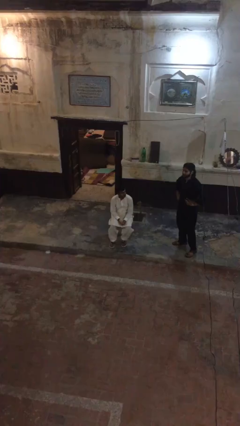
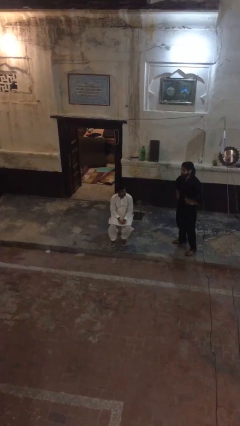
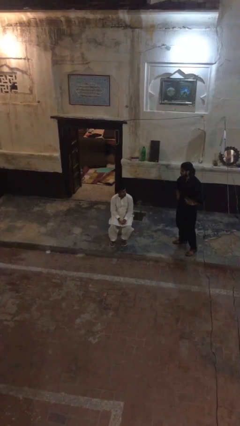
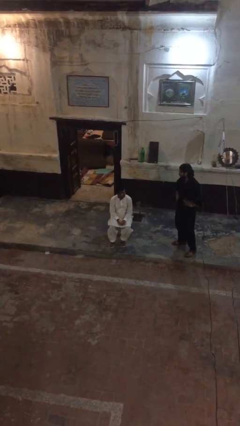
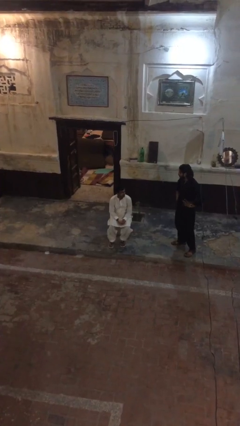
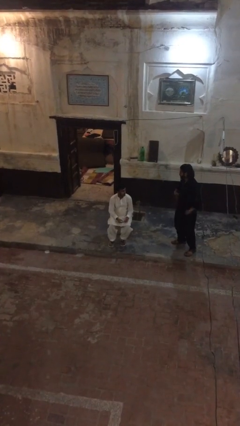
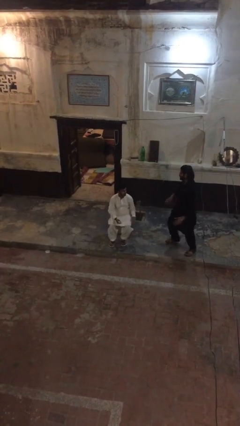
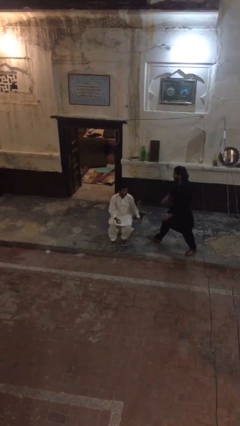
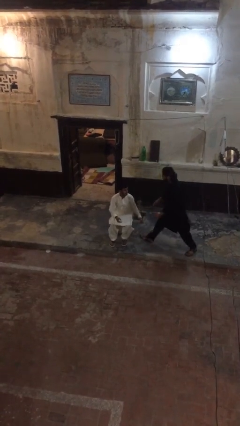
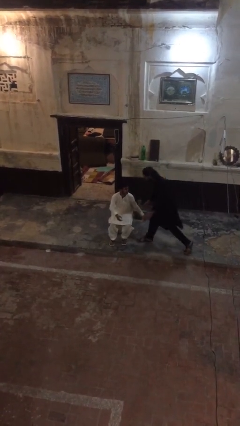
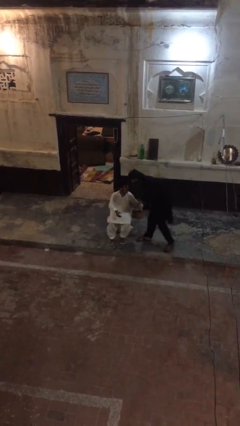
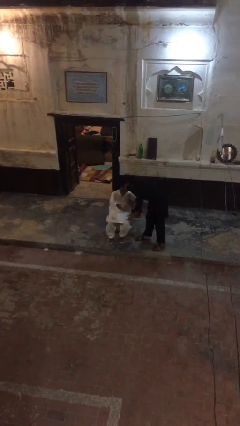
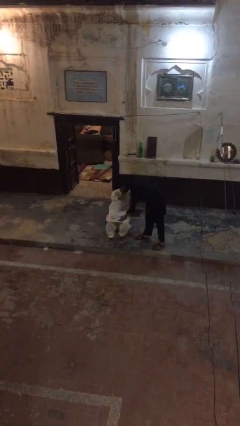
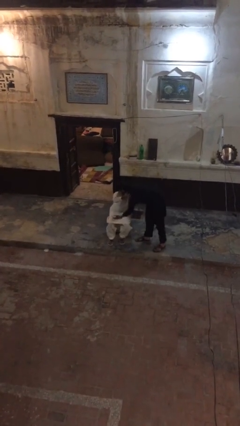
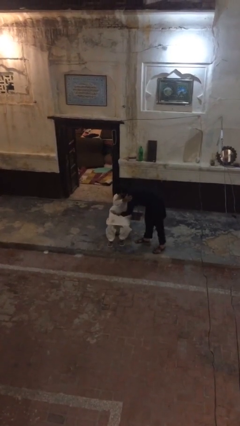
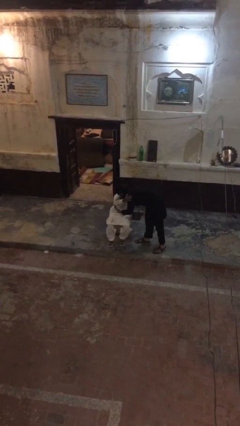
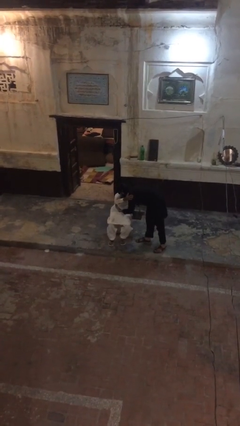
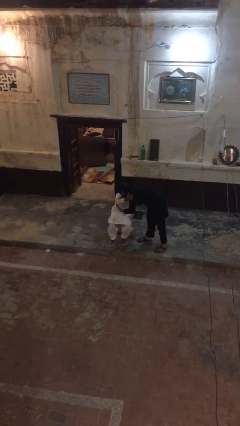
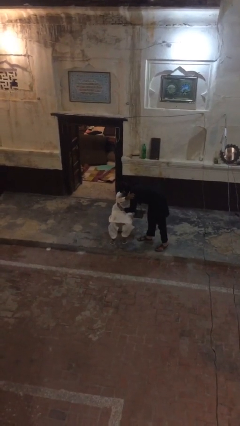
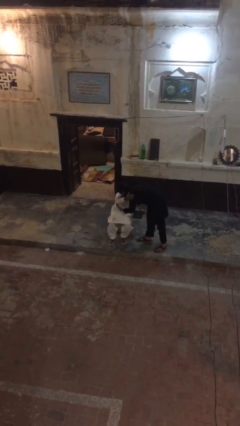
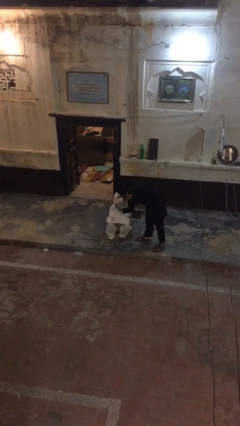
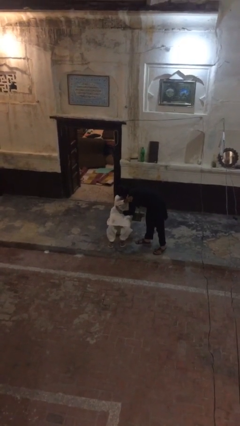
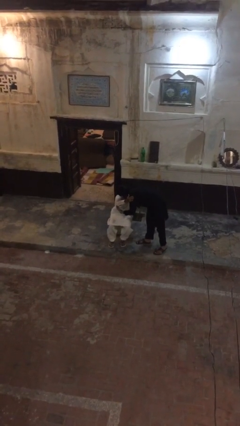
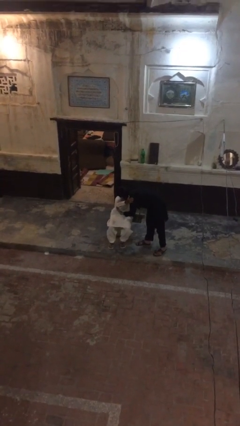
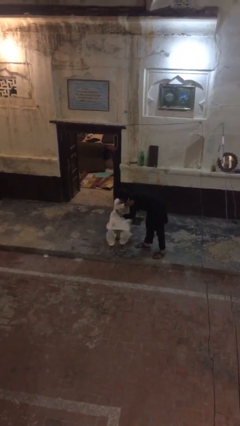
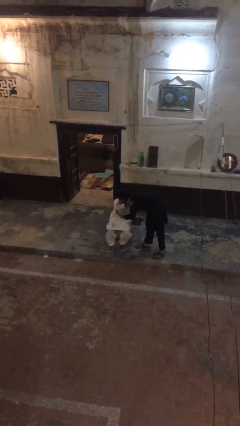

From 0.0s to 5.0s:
person embraces person

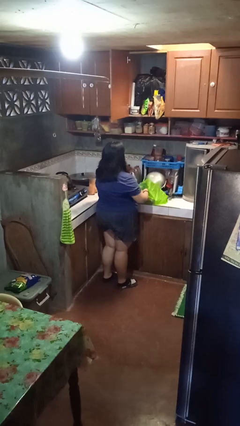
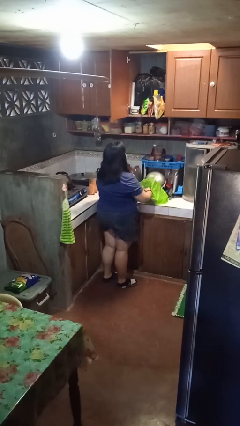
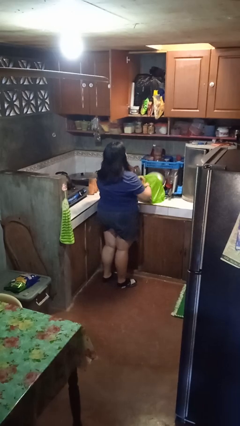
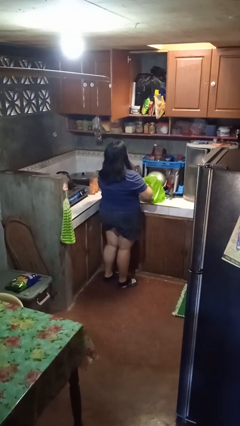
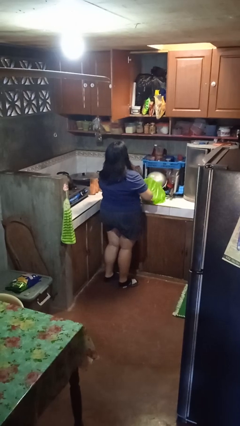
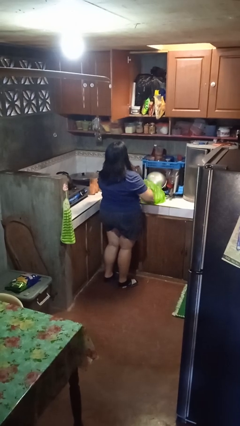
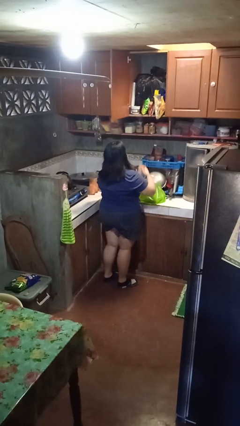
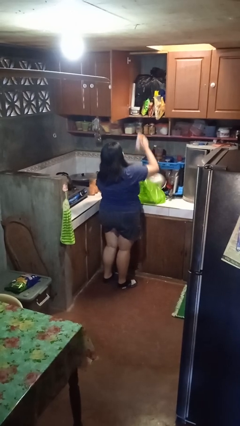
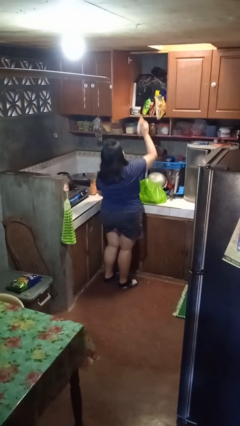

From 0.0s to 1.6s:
person loads groceries into cabinet

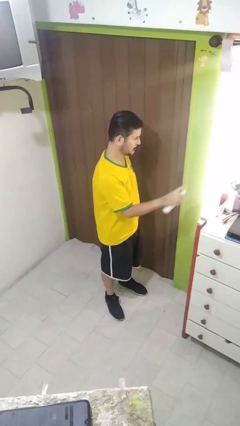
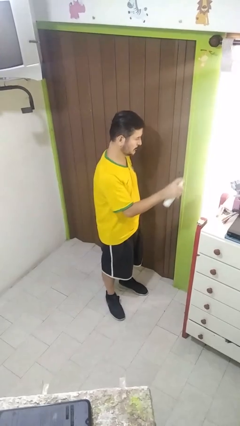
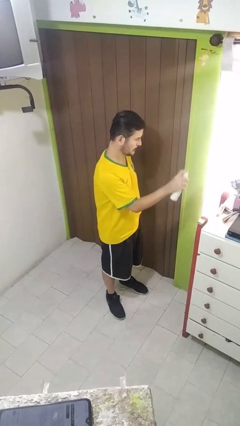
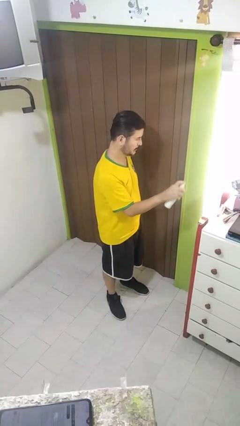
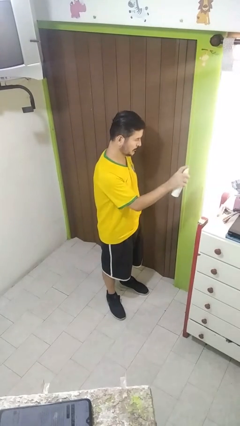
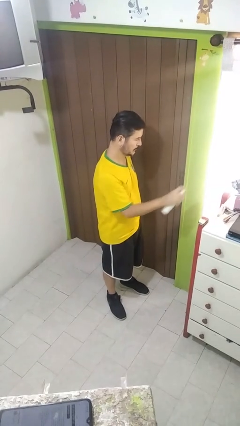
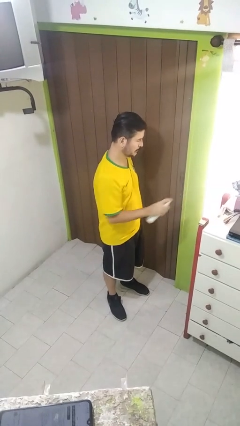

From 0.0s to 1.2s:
person sprays from bottle

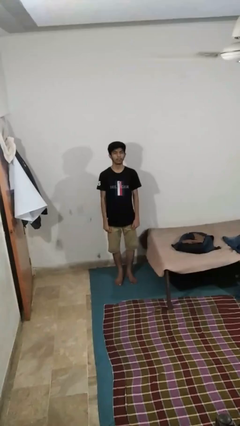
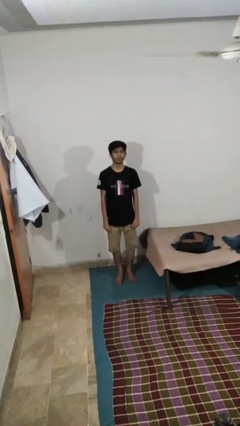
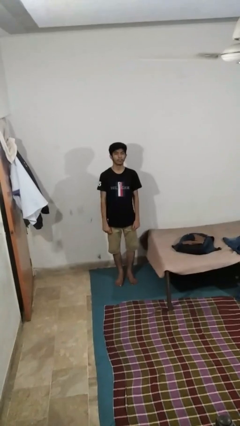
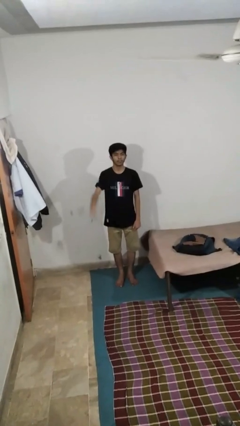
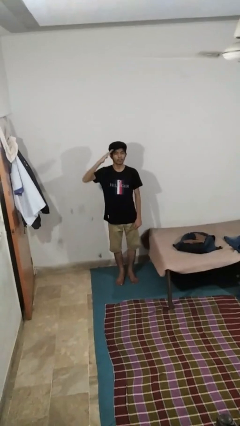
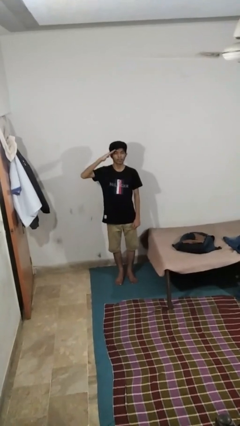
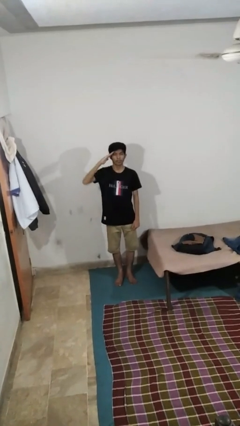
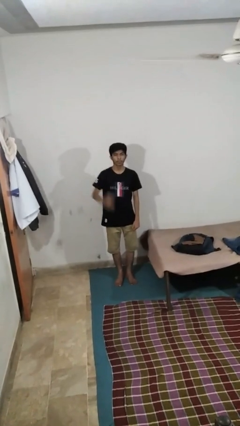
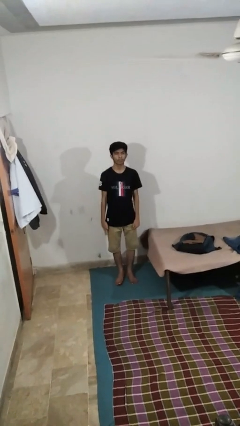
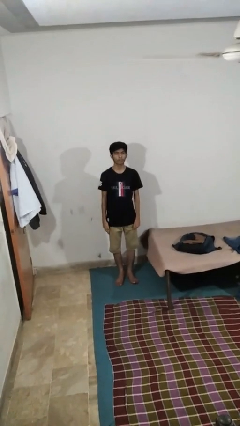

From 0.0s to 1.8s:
person salutes

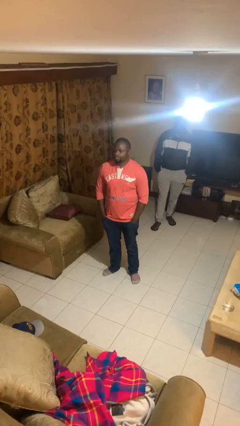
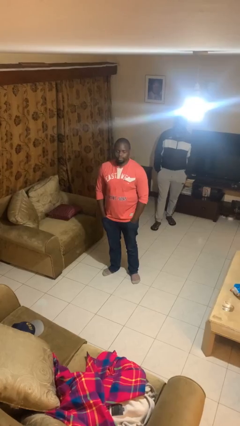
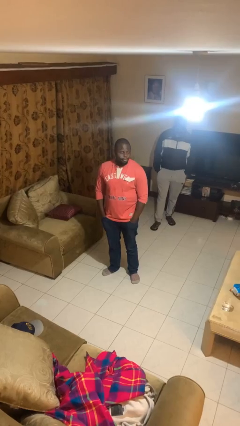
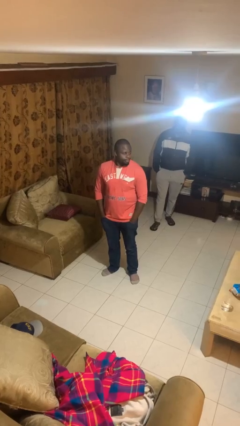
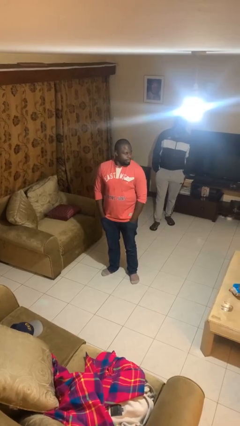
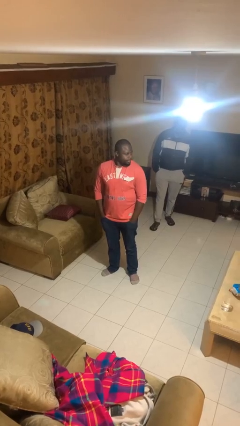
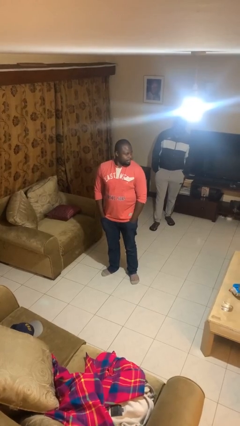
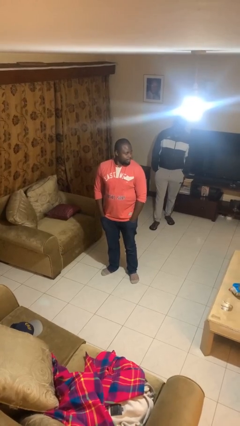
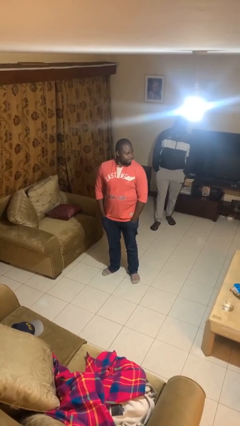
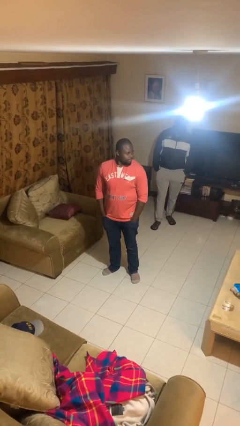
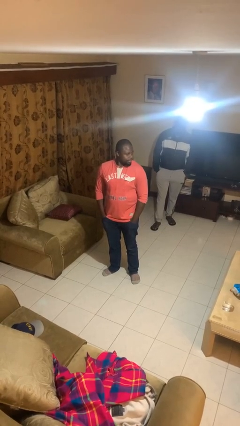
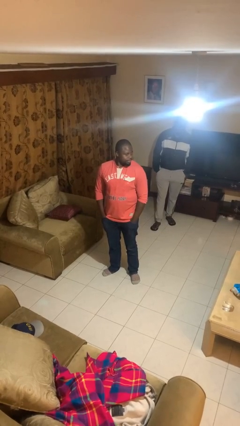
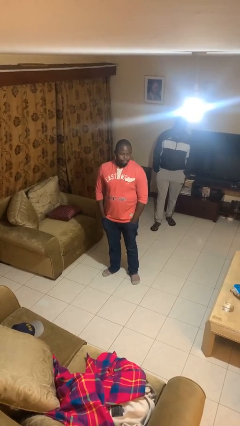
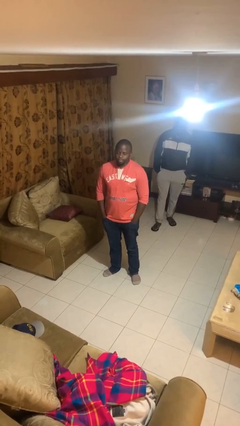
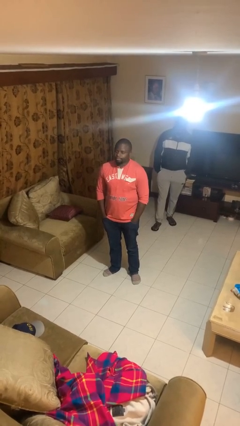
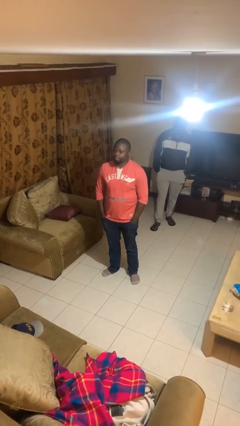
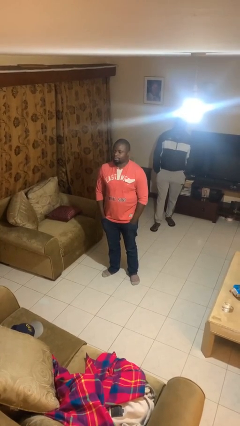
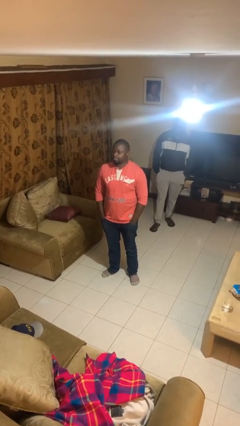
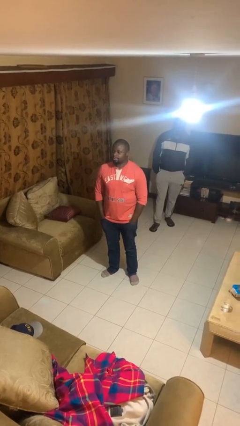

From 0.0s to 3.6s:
person looks over shoulder

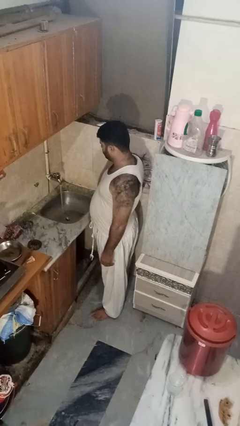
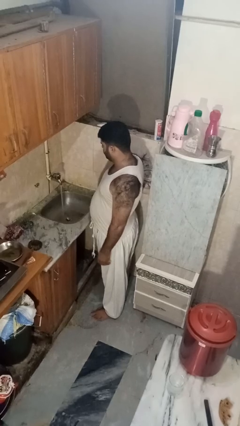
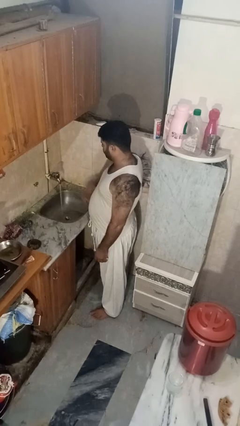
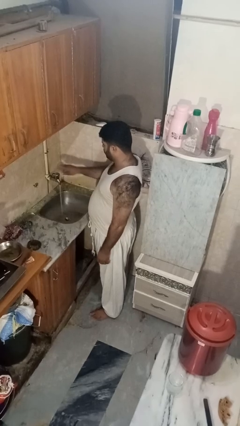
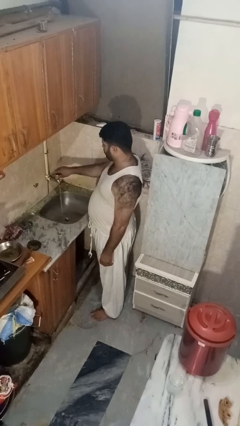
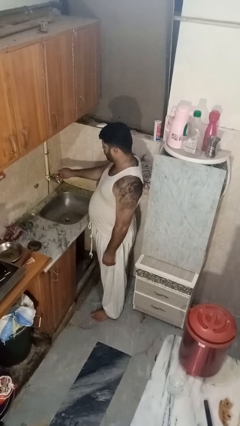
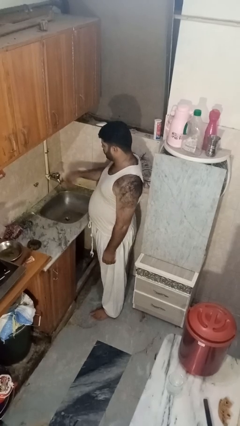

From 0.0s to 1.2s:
person turns off faucet

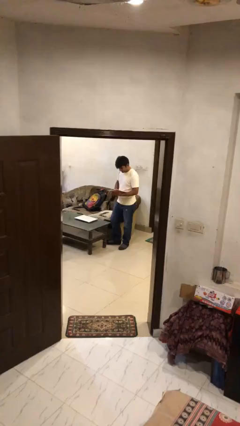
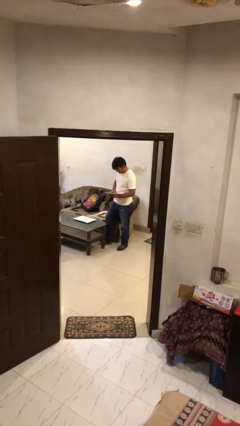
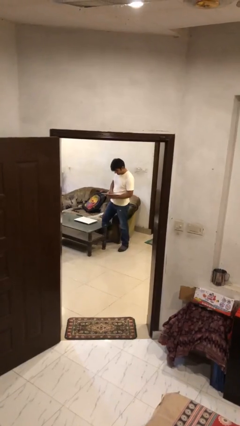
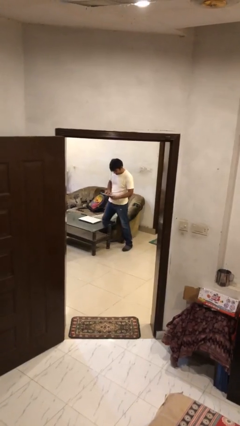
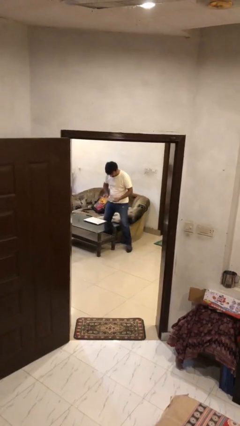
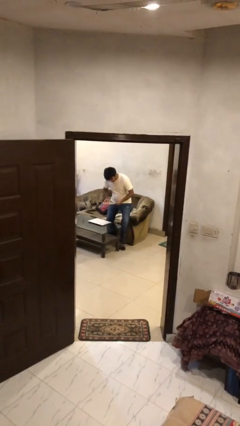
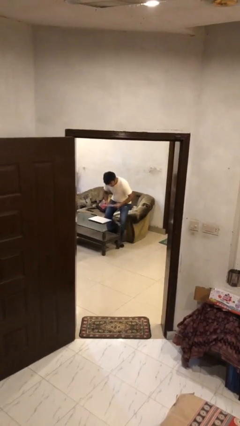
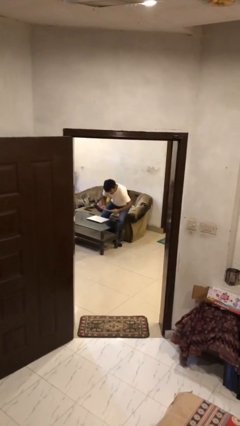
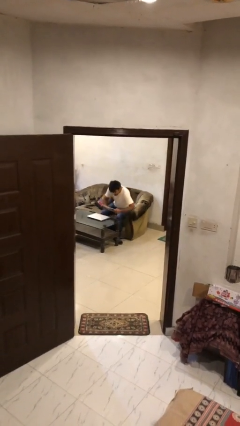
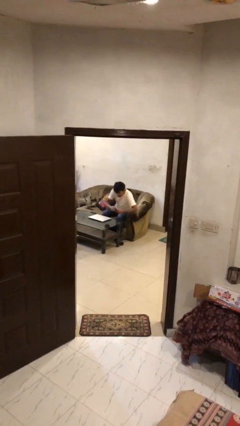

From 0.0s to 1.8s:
person sits down

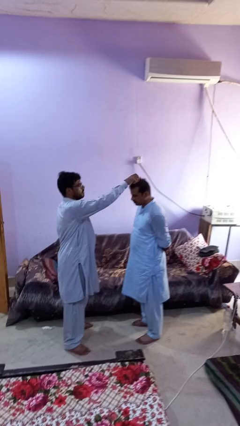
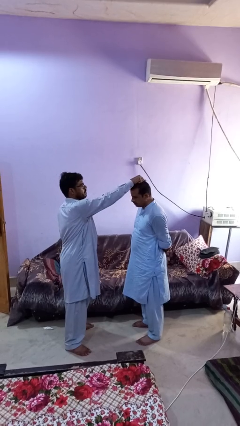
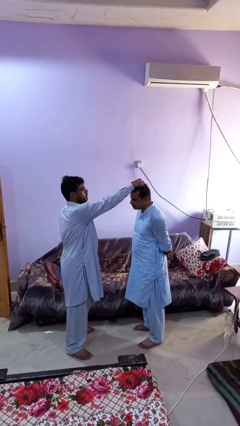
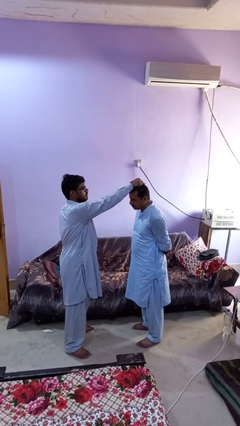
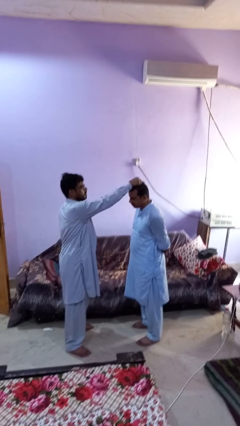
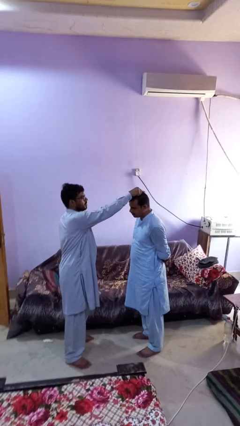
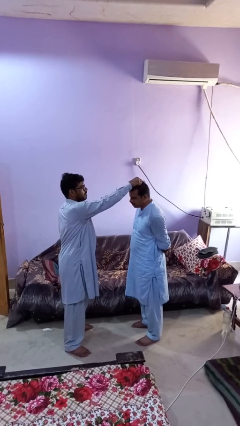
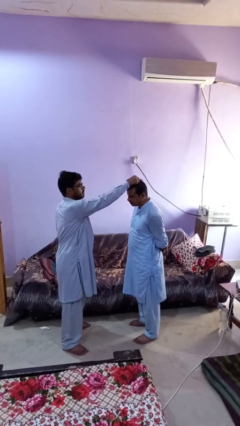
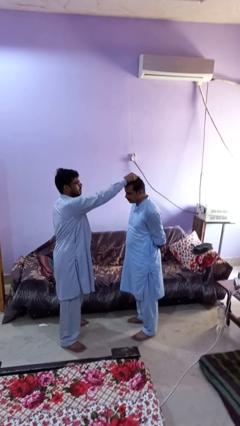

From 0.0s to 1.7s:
person grabs person by hair
